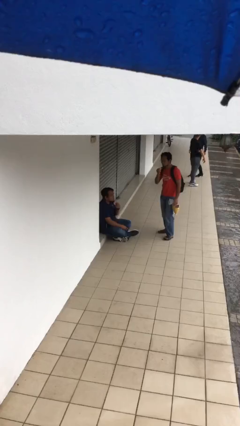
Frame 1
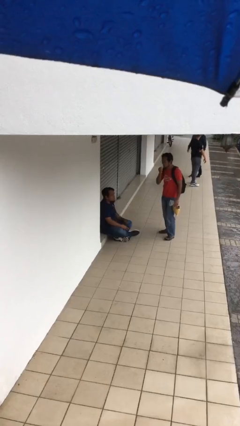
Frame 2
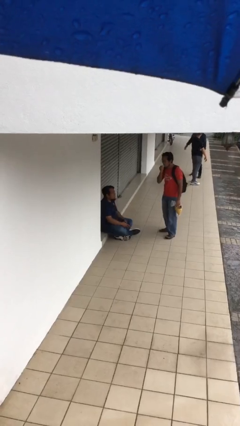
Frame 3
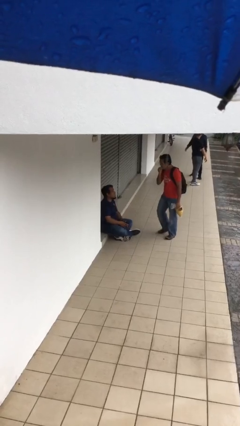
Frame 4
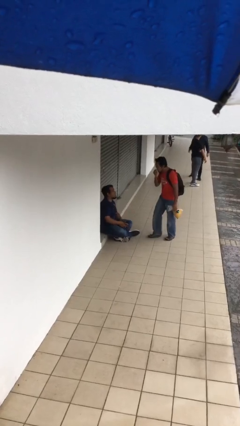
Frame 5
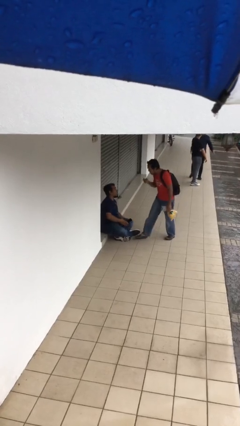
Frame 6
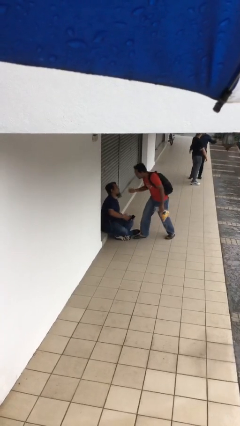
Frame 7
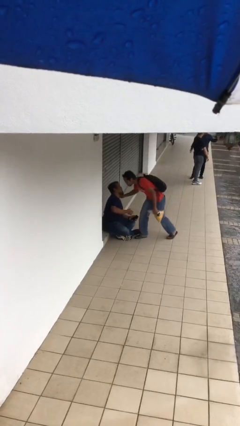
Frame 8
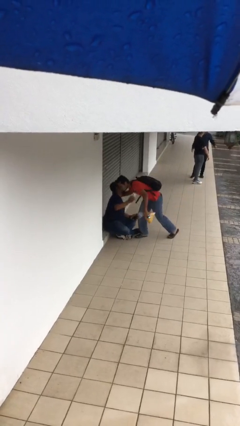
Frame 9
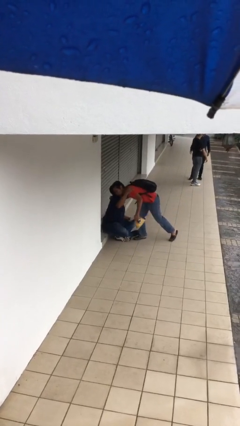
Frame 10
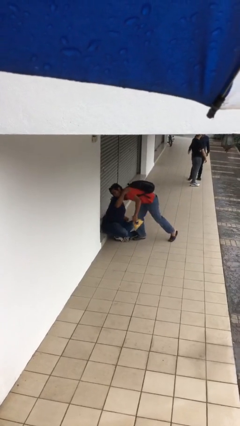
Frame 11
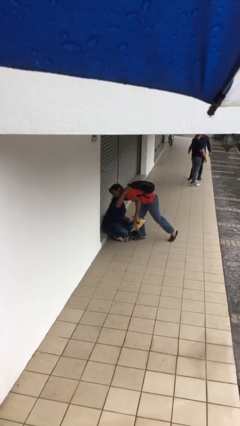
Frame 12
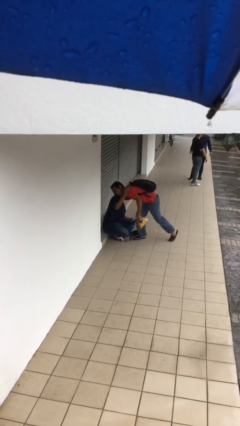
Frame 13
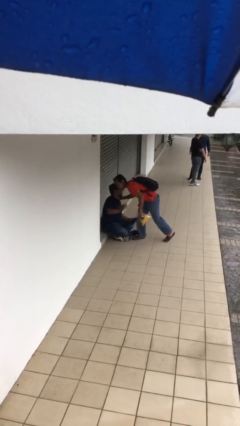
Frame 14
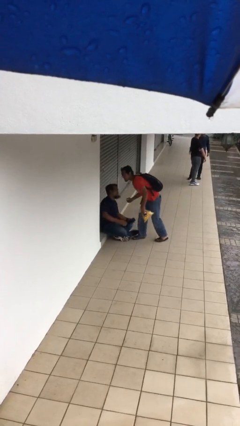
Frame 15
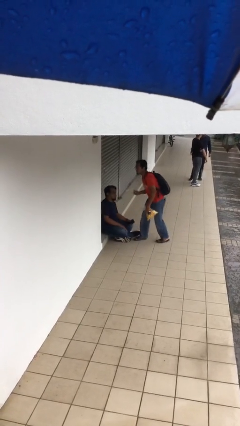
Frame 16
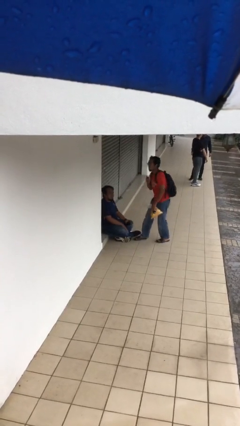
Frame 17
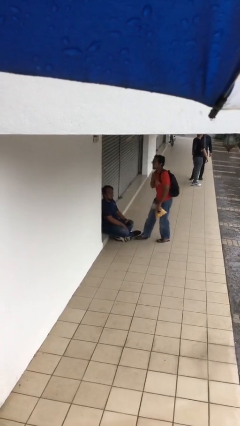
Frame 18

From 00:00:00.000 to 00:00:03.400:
person embraces person

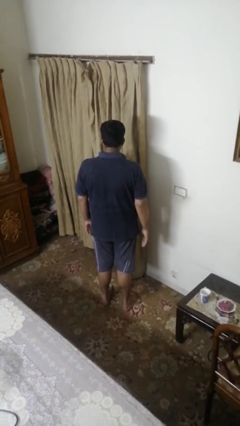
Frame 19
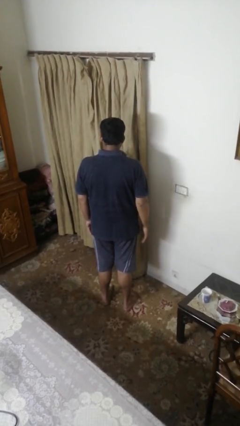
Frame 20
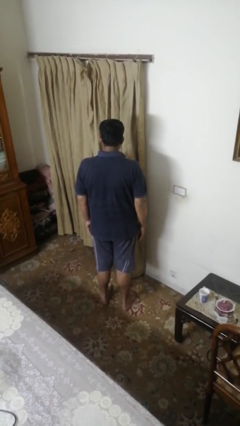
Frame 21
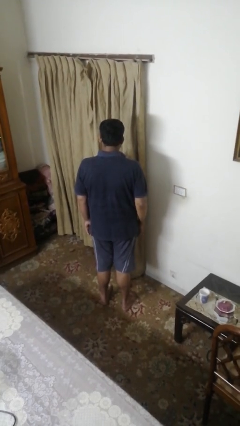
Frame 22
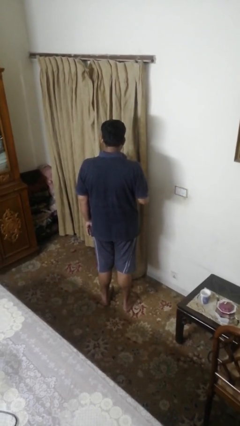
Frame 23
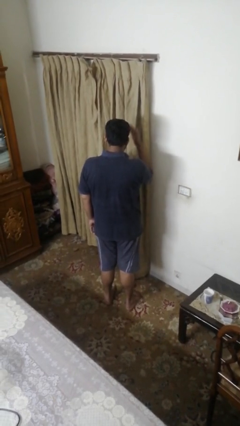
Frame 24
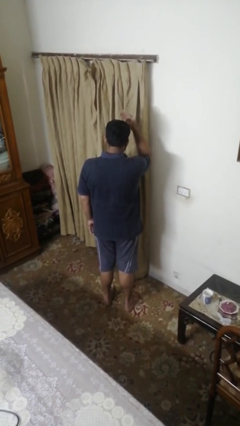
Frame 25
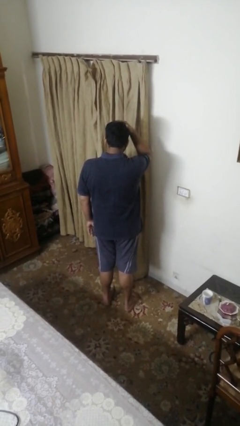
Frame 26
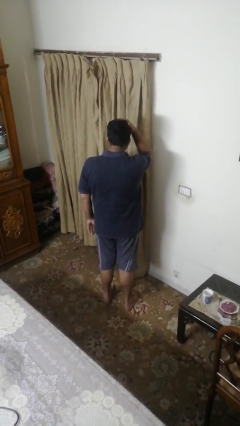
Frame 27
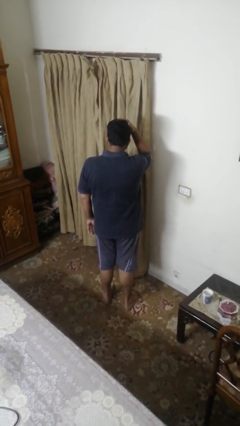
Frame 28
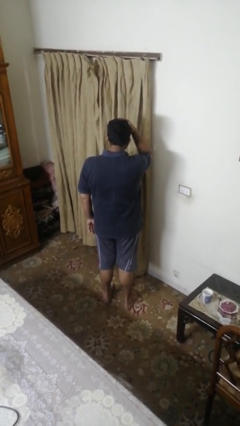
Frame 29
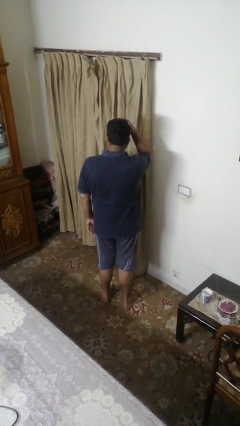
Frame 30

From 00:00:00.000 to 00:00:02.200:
person pats head

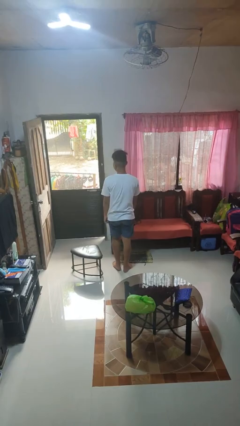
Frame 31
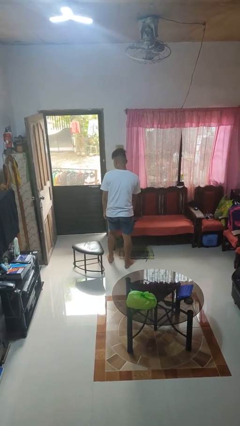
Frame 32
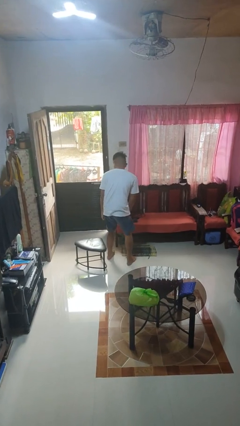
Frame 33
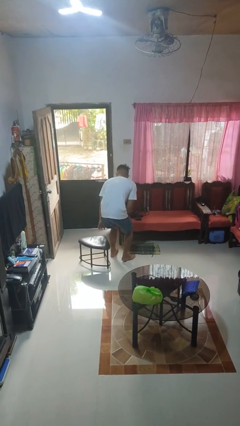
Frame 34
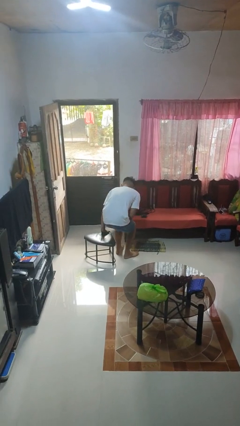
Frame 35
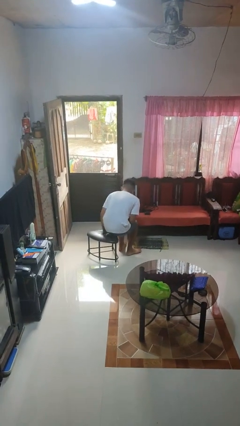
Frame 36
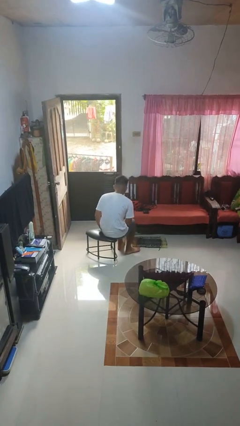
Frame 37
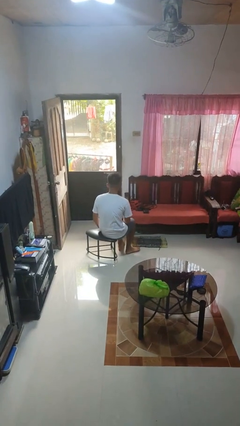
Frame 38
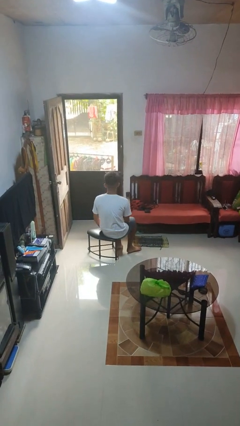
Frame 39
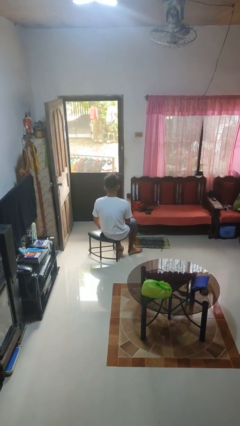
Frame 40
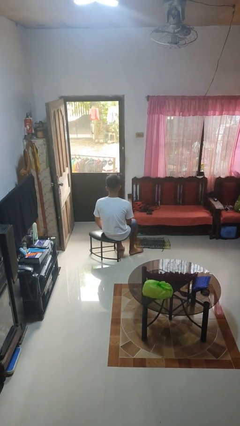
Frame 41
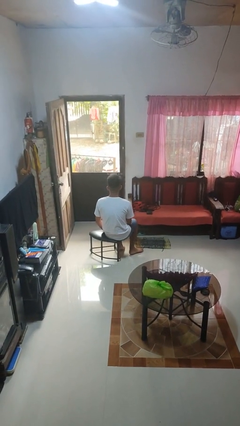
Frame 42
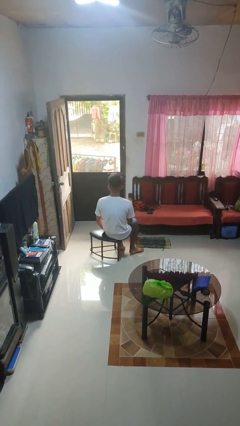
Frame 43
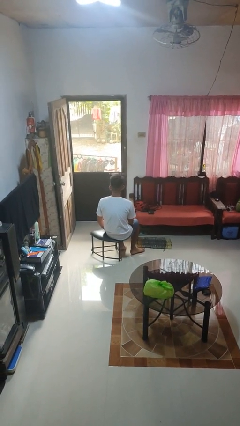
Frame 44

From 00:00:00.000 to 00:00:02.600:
person sits down

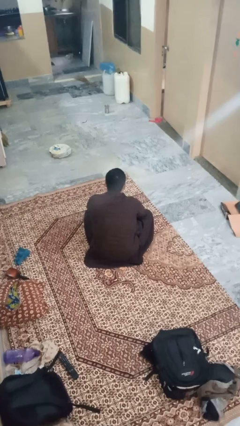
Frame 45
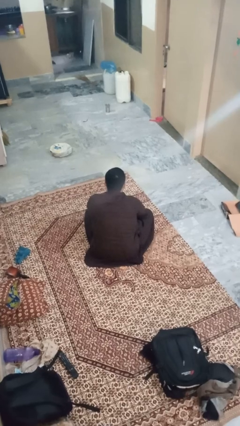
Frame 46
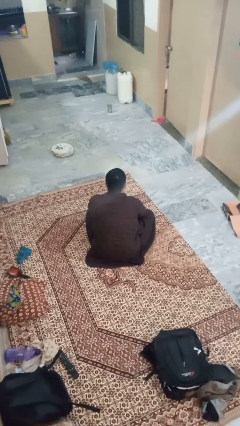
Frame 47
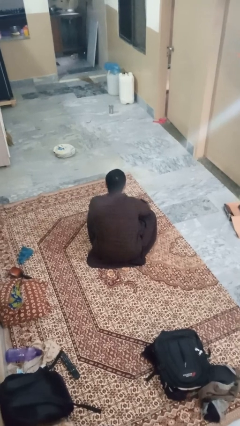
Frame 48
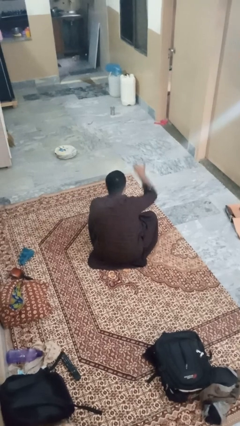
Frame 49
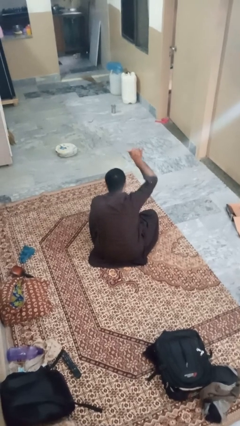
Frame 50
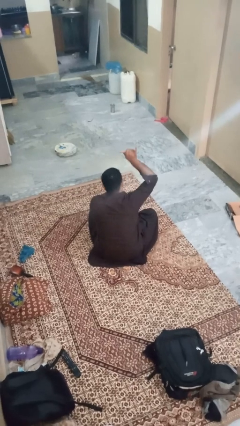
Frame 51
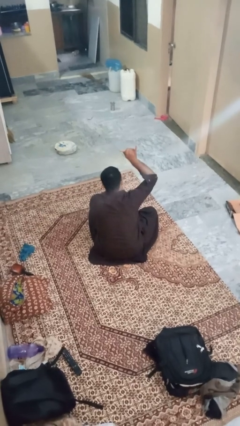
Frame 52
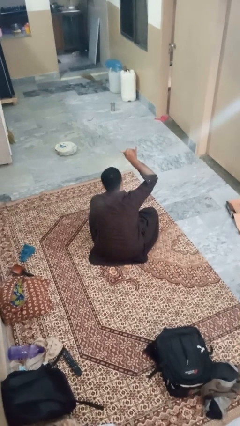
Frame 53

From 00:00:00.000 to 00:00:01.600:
person gestures hang loose

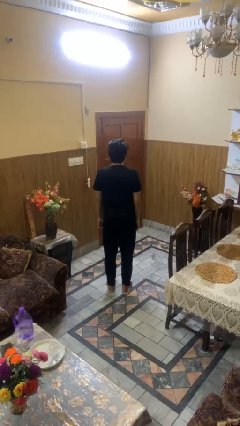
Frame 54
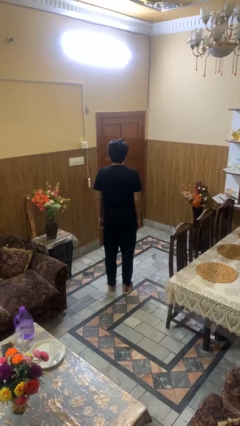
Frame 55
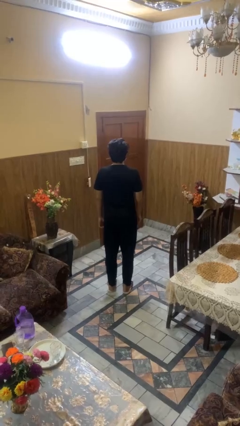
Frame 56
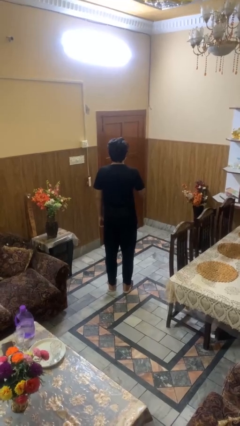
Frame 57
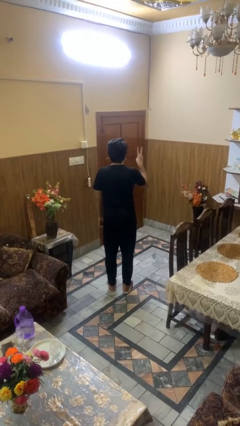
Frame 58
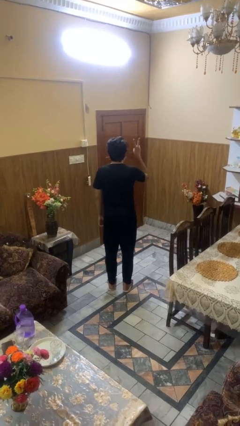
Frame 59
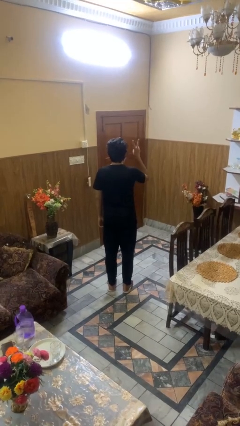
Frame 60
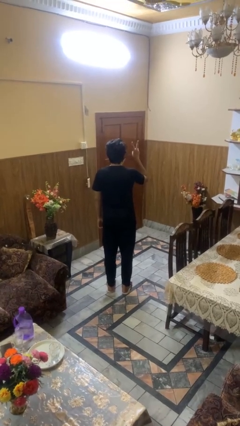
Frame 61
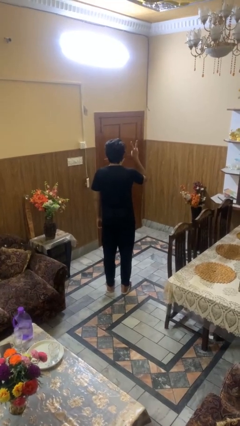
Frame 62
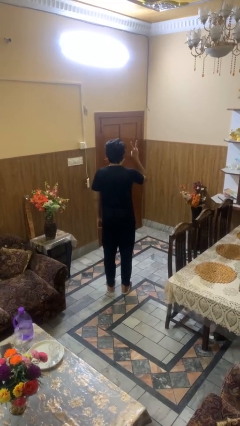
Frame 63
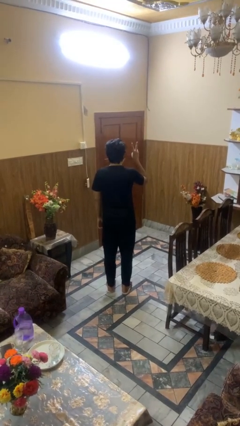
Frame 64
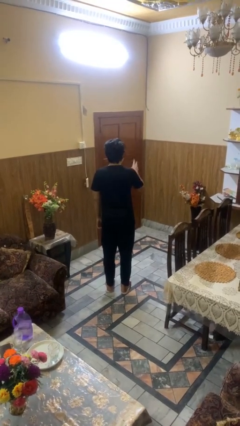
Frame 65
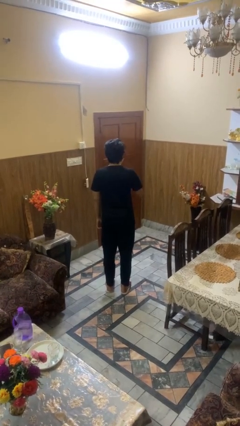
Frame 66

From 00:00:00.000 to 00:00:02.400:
person gestures peace

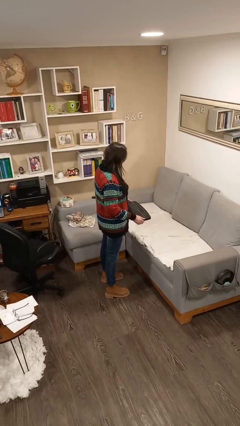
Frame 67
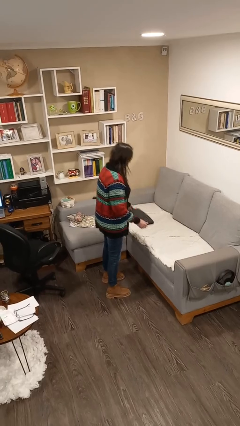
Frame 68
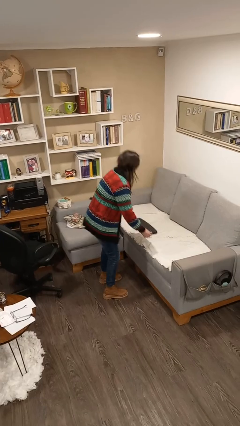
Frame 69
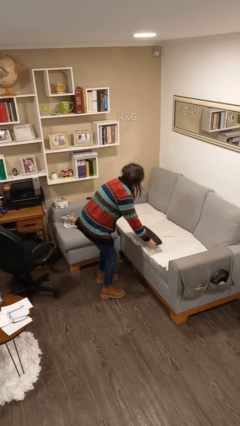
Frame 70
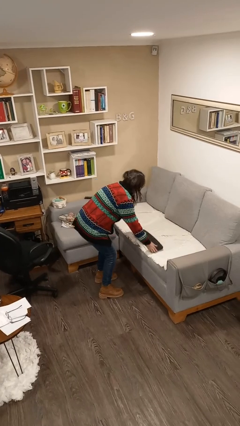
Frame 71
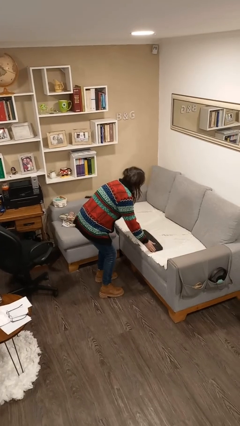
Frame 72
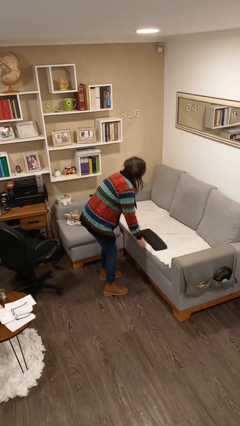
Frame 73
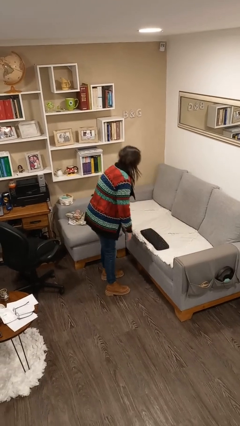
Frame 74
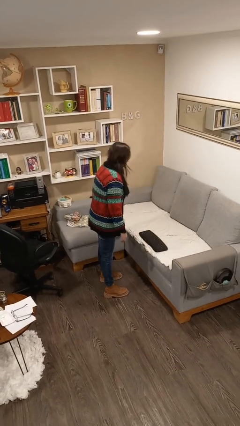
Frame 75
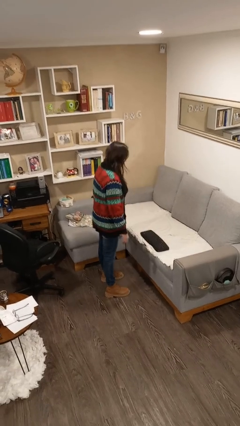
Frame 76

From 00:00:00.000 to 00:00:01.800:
person puts down object on couch

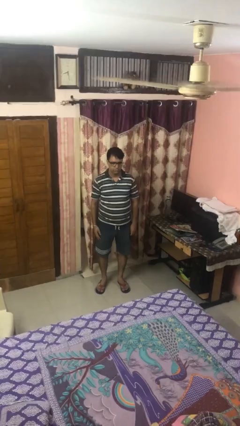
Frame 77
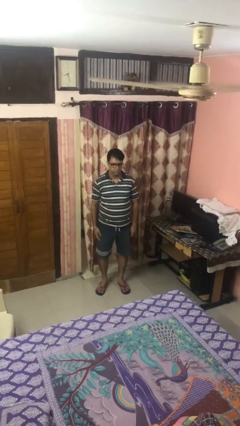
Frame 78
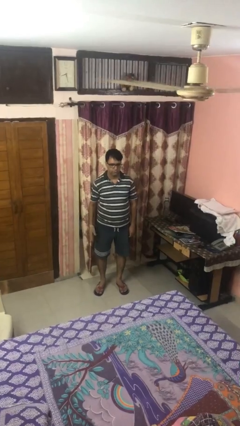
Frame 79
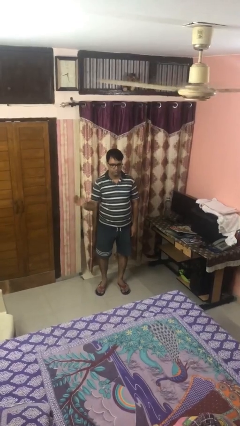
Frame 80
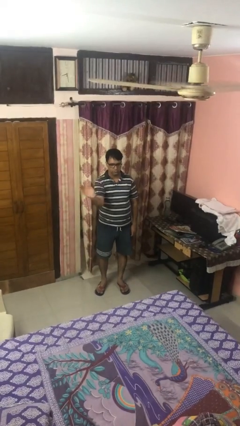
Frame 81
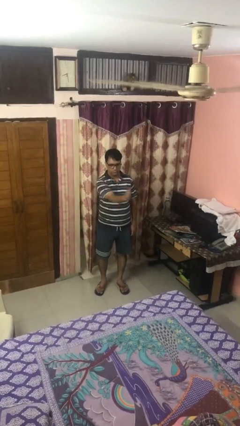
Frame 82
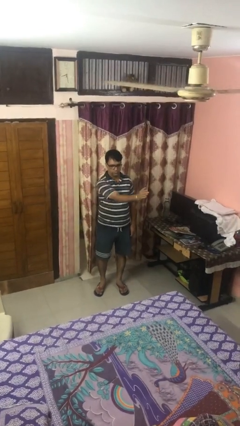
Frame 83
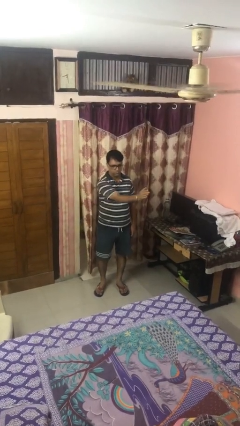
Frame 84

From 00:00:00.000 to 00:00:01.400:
person gestures swipe left

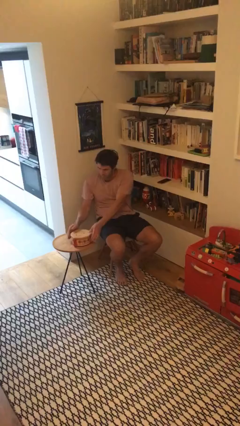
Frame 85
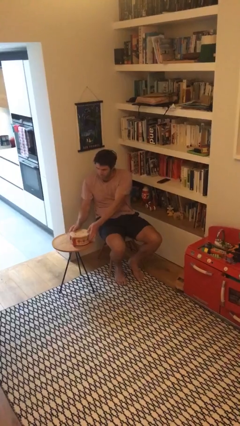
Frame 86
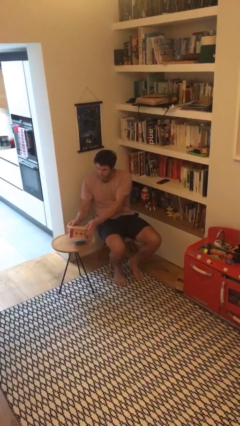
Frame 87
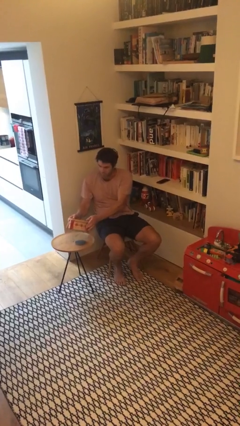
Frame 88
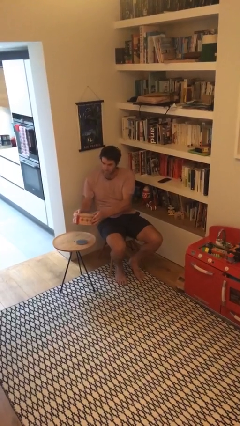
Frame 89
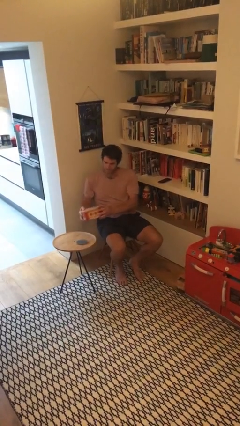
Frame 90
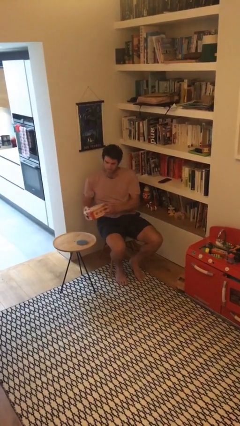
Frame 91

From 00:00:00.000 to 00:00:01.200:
person picks up object from table
